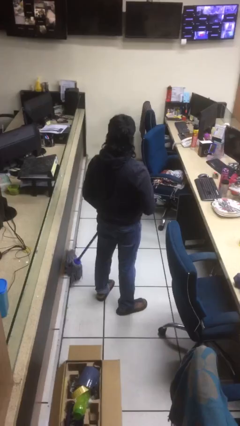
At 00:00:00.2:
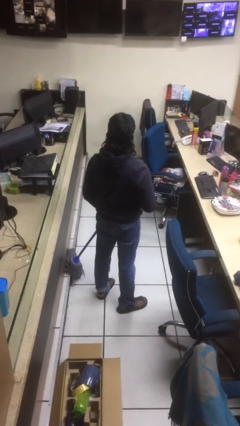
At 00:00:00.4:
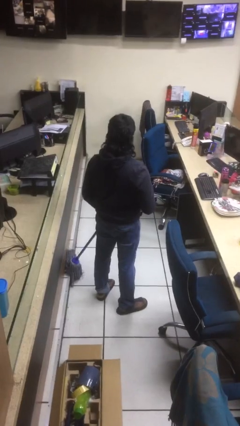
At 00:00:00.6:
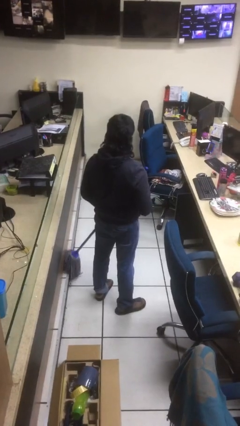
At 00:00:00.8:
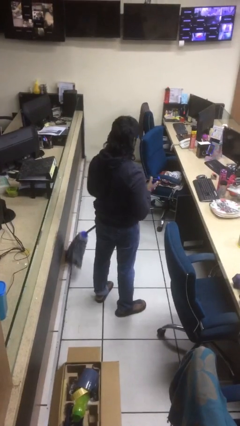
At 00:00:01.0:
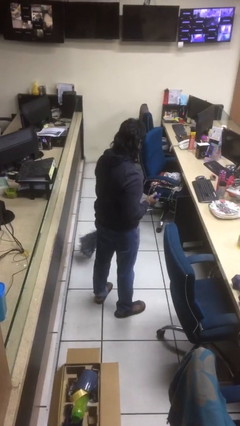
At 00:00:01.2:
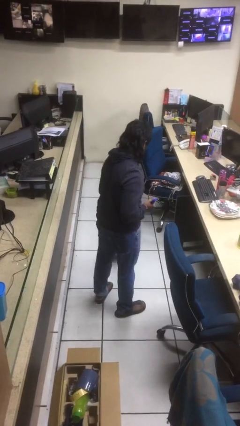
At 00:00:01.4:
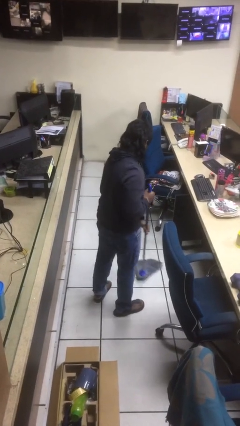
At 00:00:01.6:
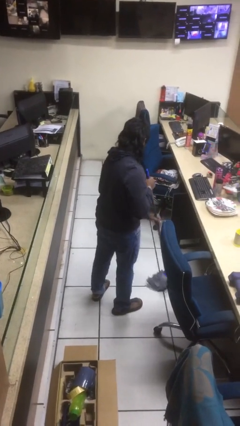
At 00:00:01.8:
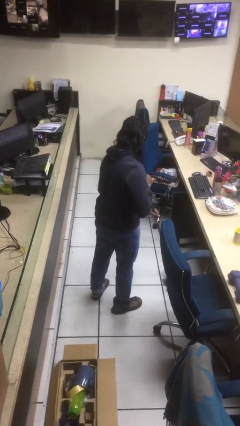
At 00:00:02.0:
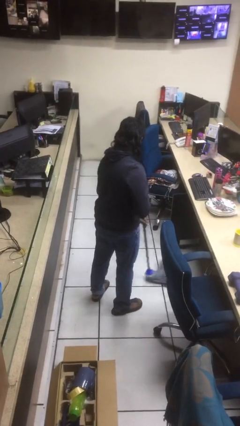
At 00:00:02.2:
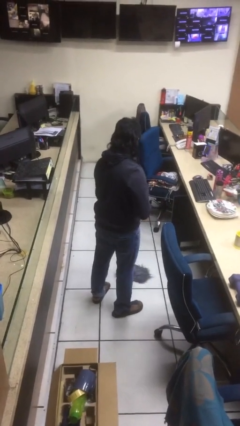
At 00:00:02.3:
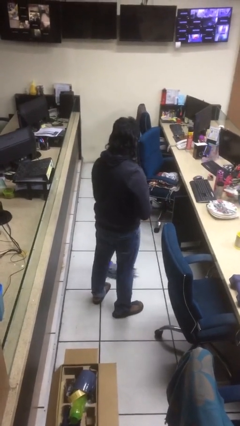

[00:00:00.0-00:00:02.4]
person mops

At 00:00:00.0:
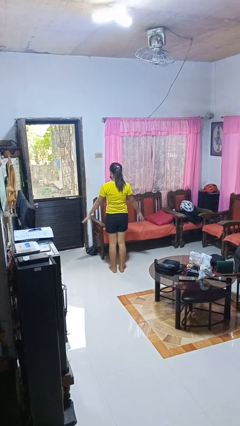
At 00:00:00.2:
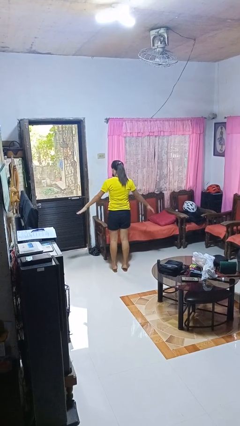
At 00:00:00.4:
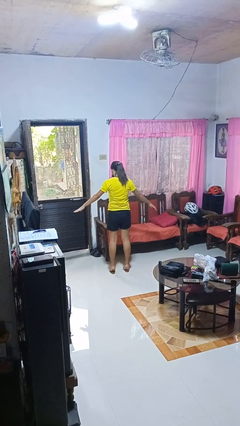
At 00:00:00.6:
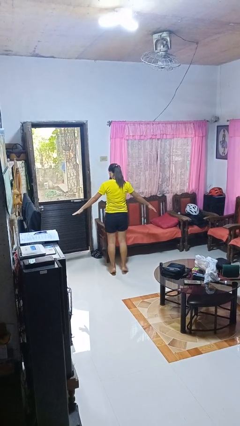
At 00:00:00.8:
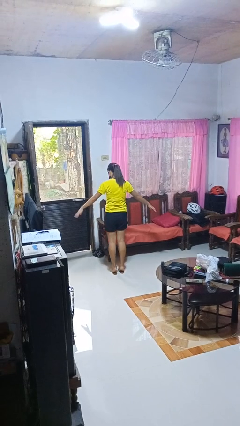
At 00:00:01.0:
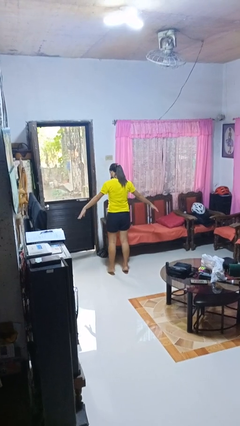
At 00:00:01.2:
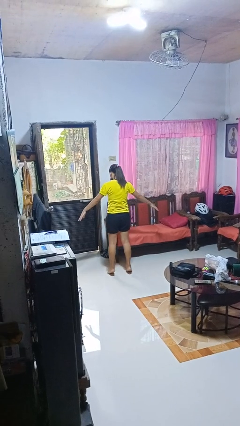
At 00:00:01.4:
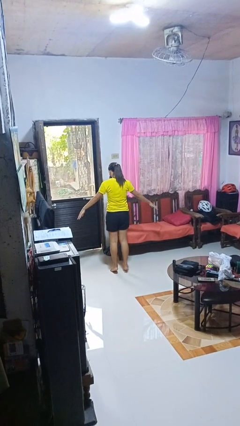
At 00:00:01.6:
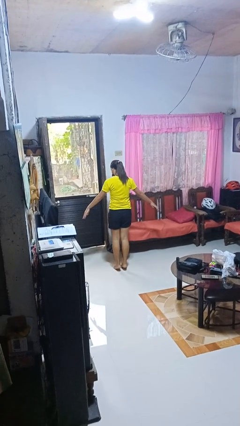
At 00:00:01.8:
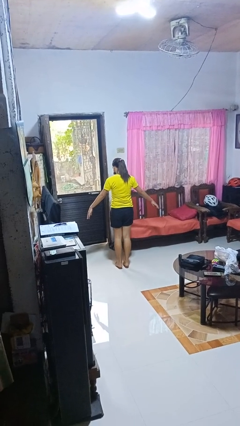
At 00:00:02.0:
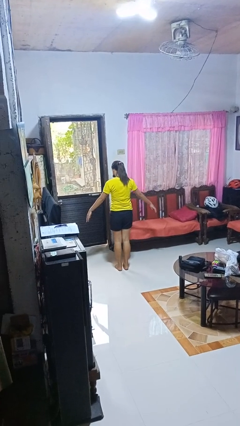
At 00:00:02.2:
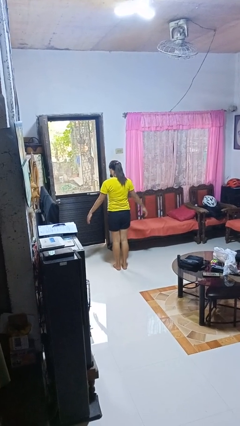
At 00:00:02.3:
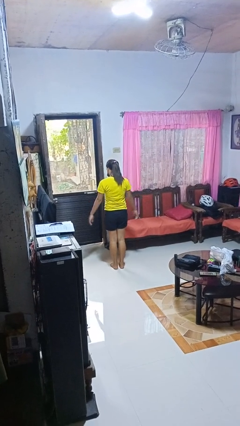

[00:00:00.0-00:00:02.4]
person walks tiptoe

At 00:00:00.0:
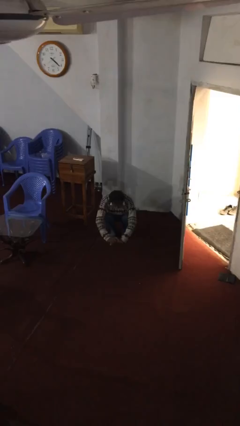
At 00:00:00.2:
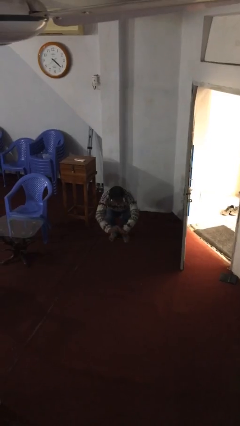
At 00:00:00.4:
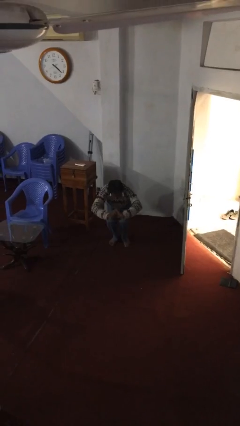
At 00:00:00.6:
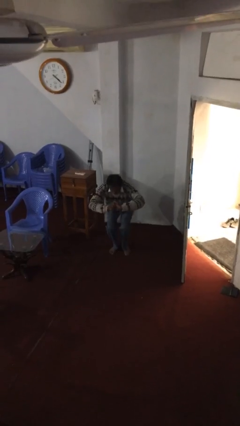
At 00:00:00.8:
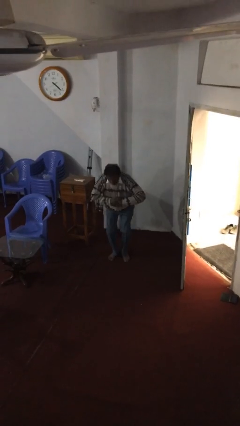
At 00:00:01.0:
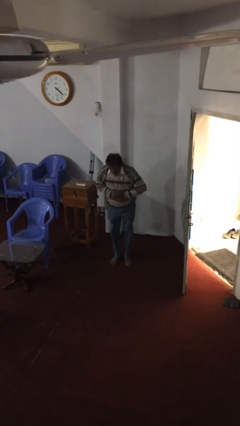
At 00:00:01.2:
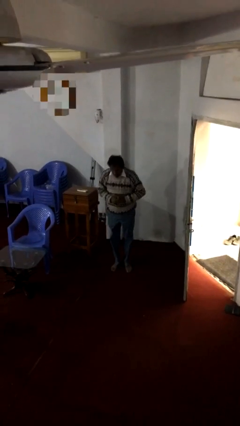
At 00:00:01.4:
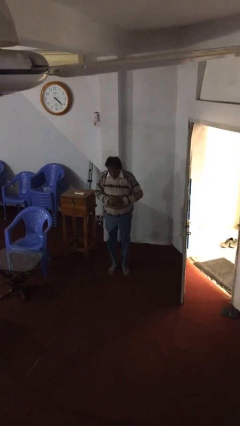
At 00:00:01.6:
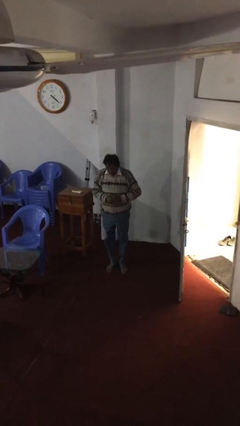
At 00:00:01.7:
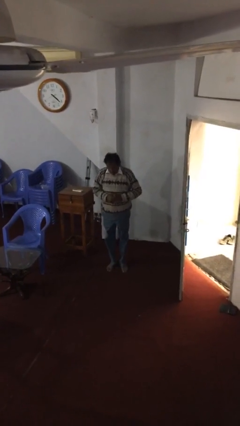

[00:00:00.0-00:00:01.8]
person stands up

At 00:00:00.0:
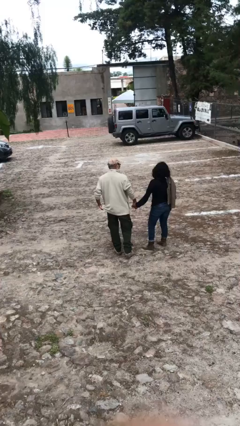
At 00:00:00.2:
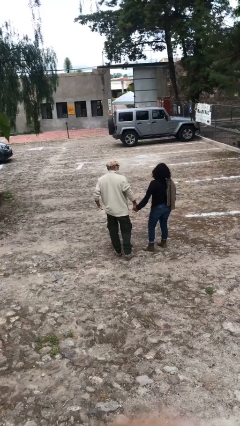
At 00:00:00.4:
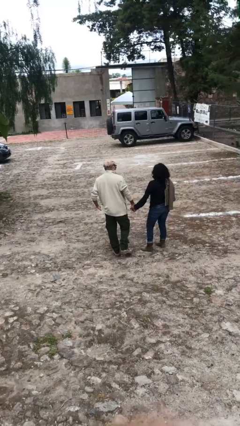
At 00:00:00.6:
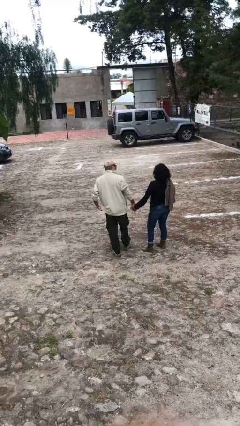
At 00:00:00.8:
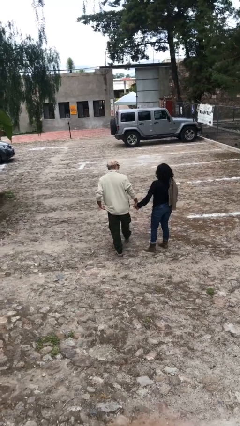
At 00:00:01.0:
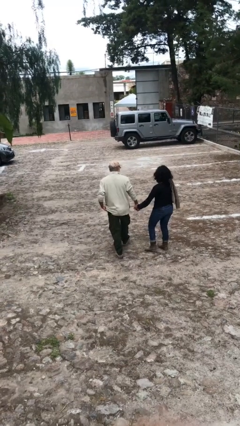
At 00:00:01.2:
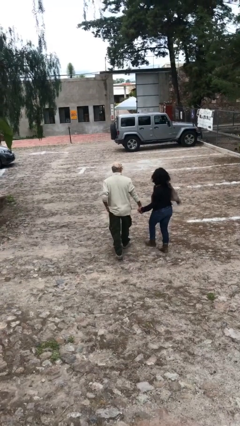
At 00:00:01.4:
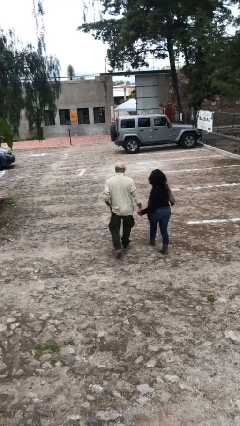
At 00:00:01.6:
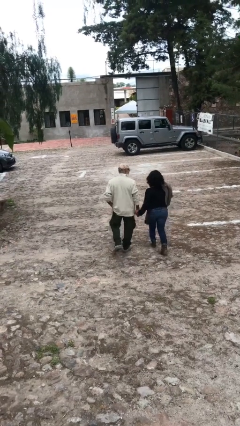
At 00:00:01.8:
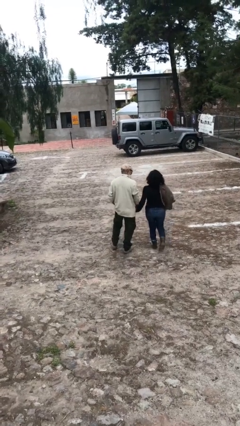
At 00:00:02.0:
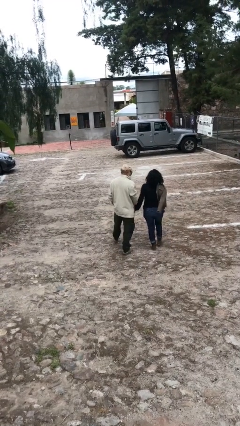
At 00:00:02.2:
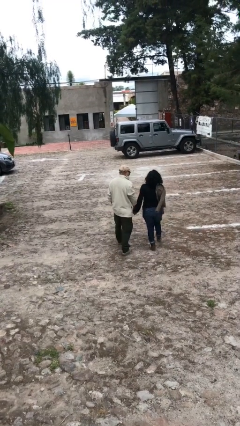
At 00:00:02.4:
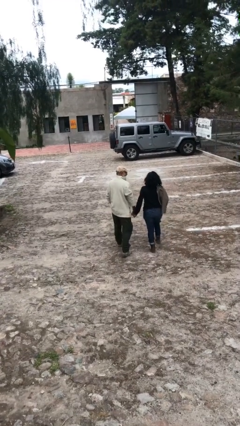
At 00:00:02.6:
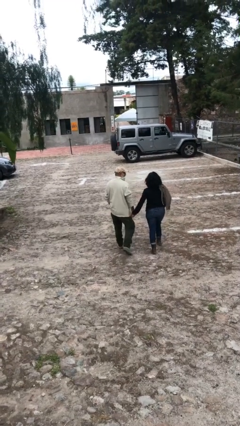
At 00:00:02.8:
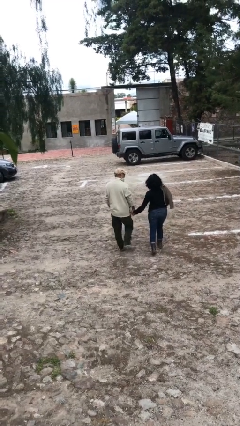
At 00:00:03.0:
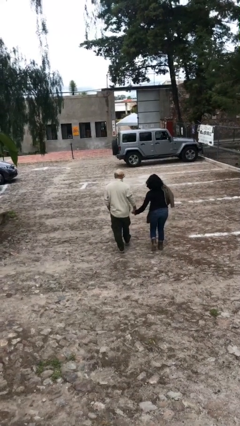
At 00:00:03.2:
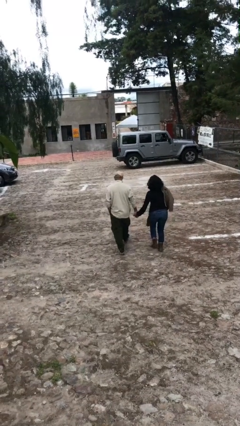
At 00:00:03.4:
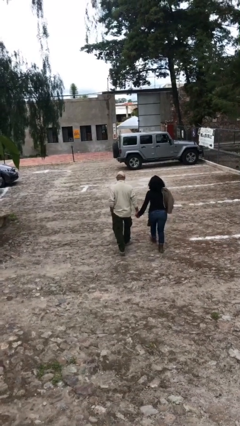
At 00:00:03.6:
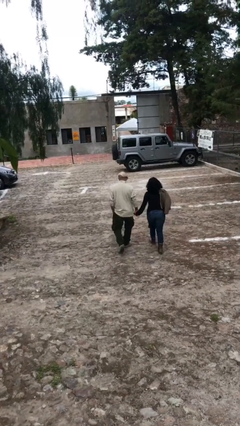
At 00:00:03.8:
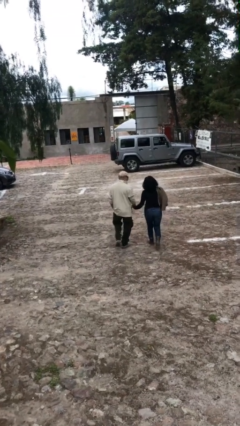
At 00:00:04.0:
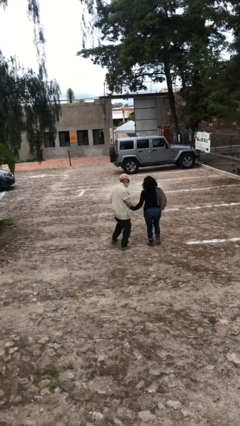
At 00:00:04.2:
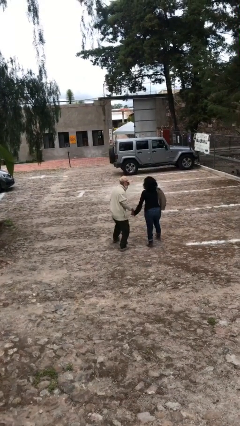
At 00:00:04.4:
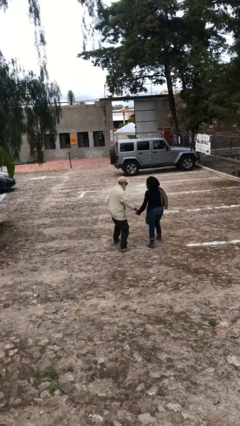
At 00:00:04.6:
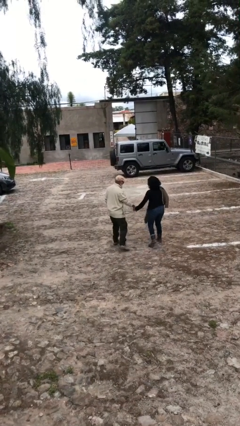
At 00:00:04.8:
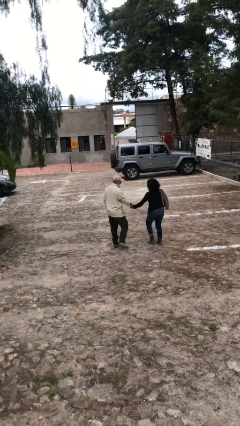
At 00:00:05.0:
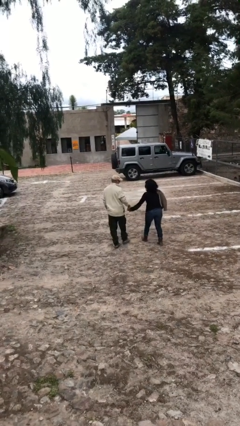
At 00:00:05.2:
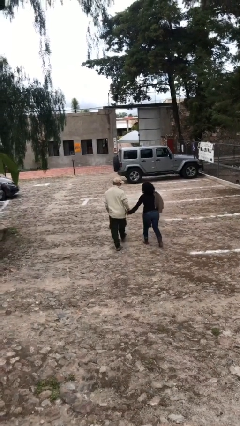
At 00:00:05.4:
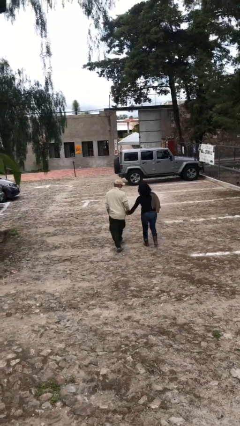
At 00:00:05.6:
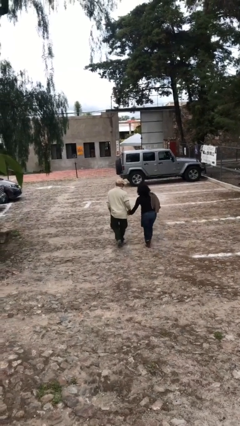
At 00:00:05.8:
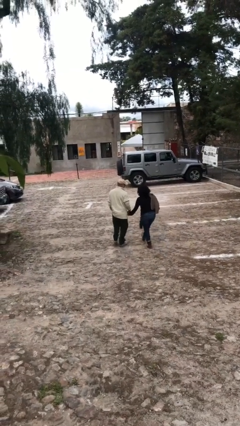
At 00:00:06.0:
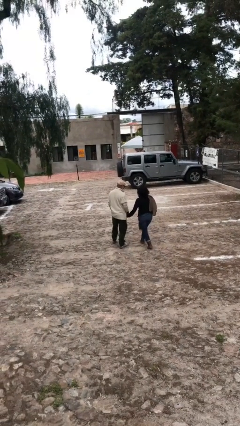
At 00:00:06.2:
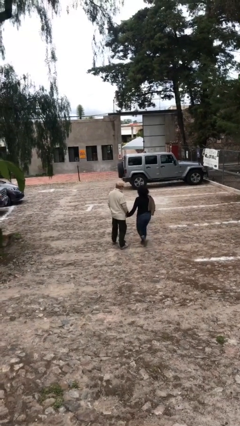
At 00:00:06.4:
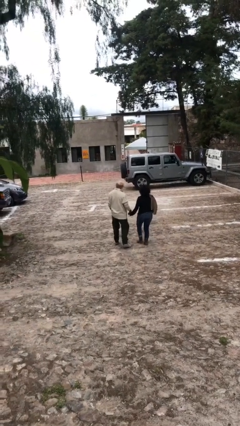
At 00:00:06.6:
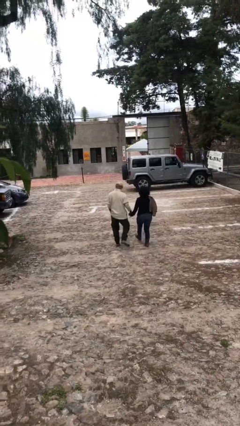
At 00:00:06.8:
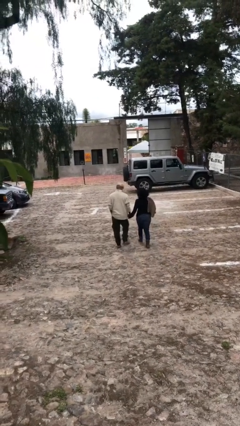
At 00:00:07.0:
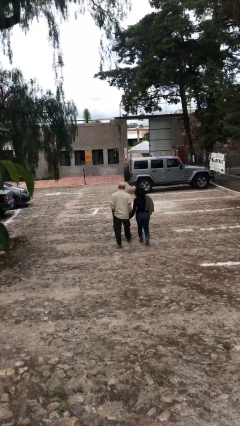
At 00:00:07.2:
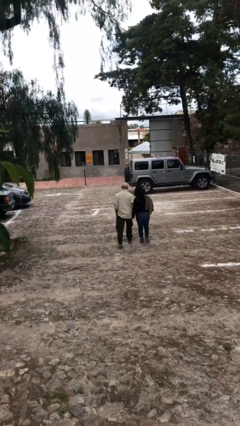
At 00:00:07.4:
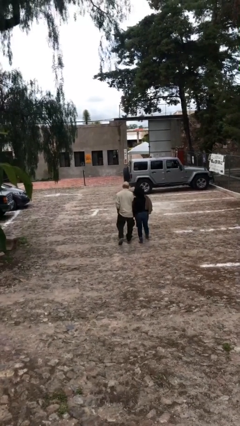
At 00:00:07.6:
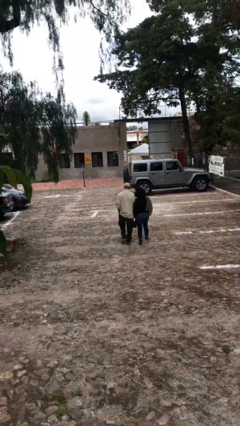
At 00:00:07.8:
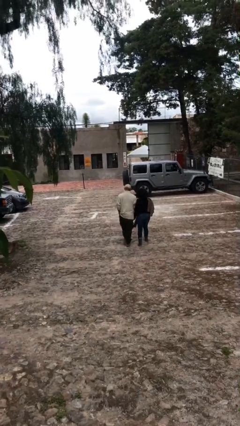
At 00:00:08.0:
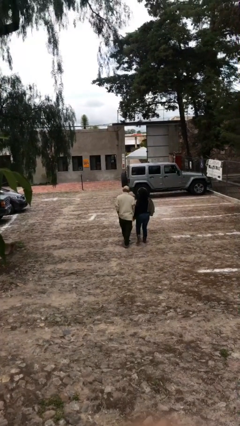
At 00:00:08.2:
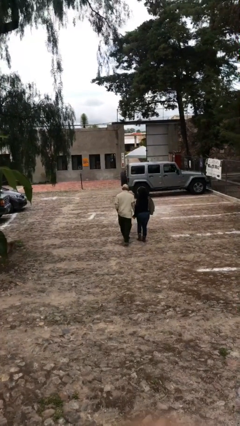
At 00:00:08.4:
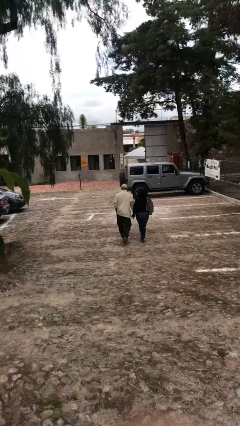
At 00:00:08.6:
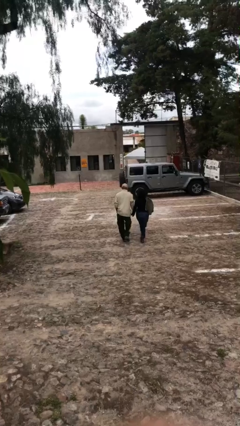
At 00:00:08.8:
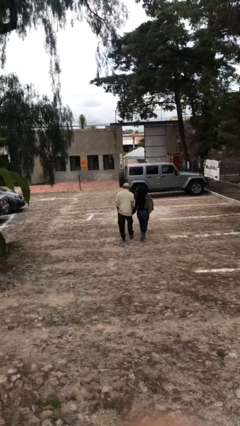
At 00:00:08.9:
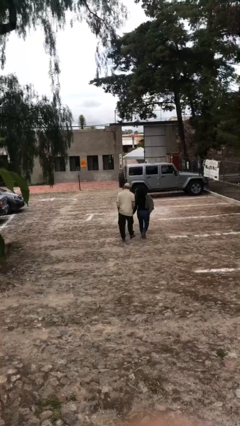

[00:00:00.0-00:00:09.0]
person holds hand

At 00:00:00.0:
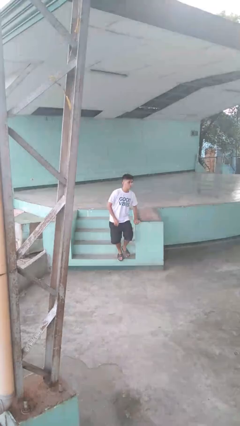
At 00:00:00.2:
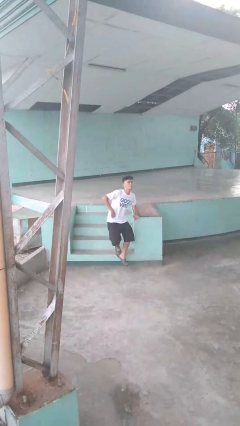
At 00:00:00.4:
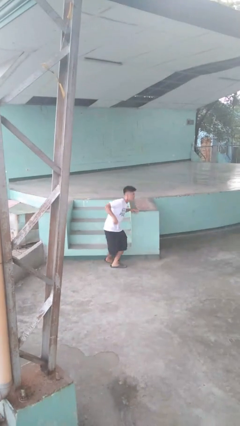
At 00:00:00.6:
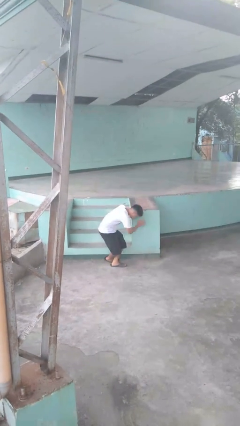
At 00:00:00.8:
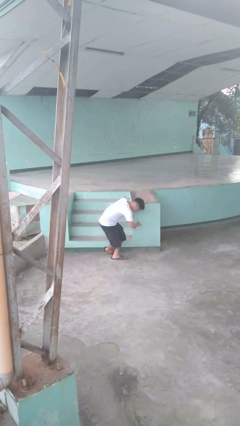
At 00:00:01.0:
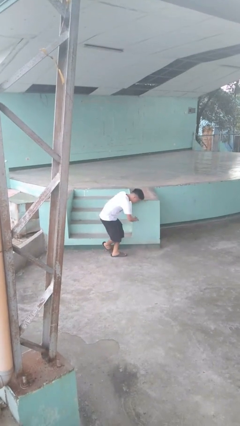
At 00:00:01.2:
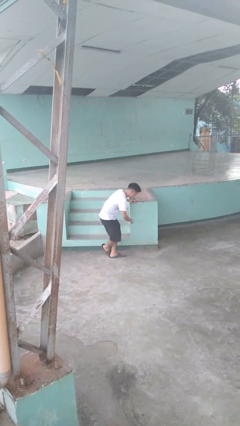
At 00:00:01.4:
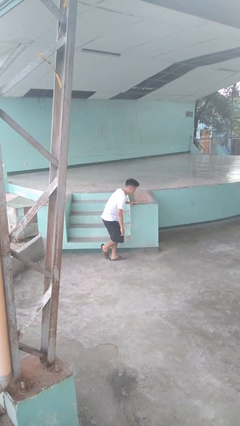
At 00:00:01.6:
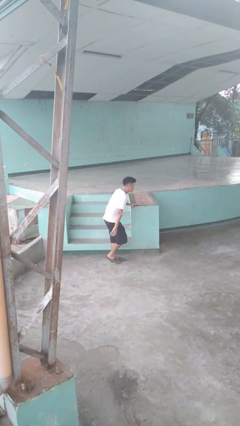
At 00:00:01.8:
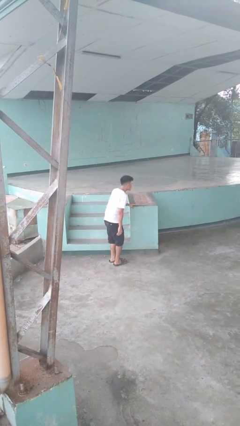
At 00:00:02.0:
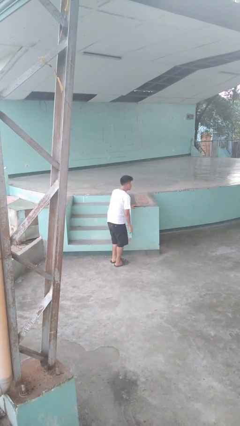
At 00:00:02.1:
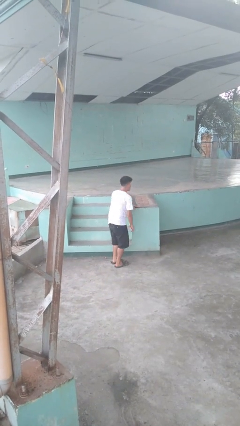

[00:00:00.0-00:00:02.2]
person trips on stair
